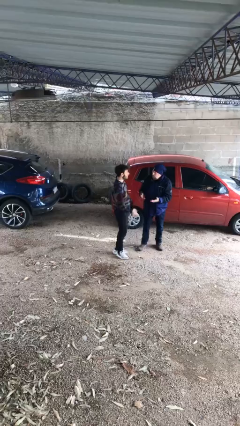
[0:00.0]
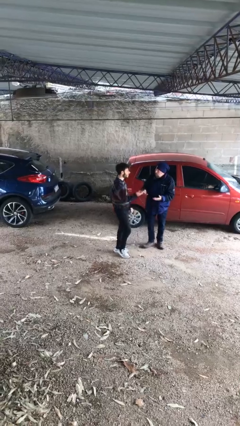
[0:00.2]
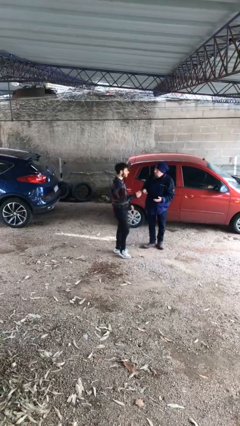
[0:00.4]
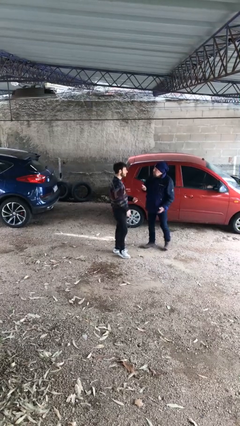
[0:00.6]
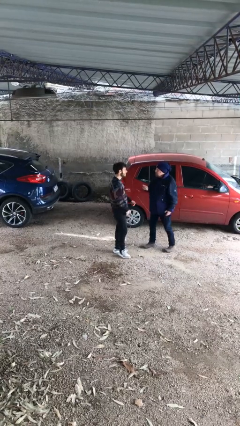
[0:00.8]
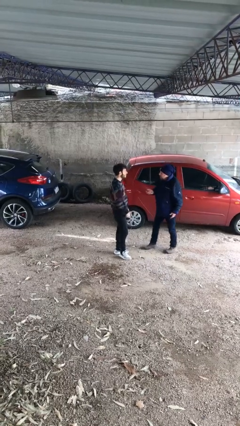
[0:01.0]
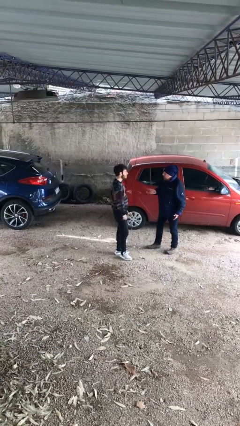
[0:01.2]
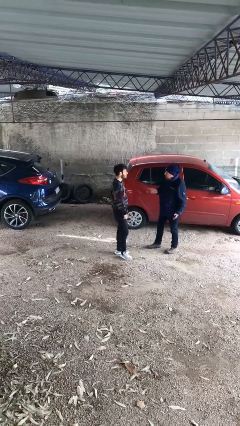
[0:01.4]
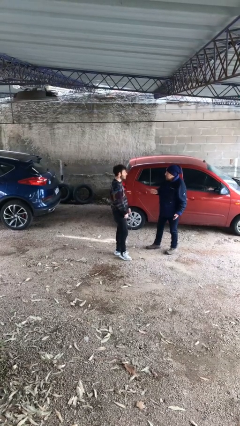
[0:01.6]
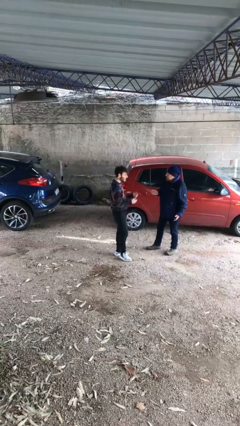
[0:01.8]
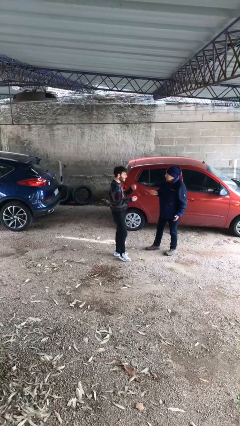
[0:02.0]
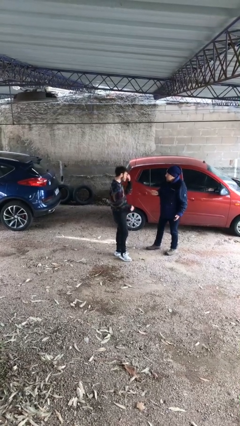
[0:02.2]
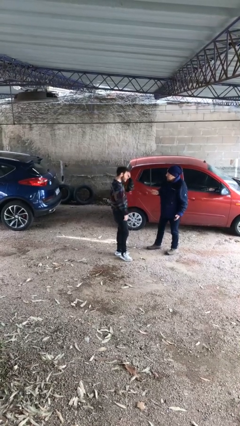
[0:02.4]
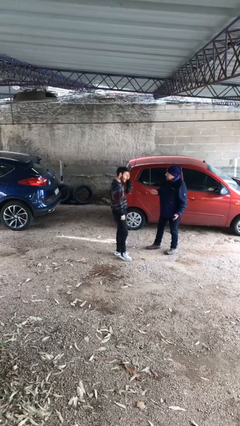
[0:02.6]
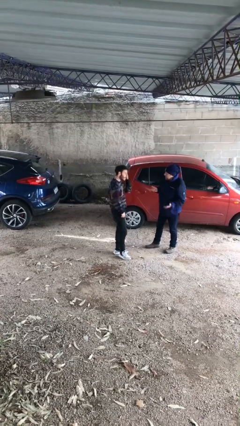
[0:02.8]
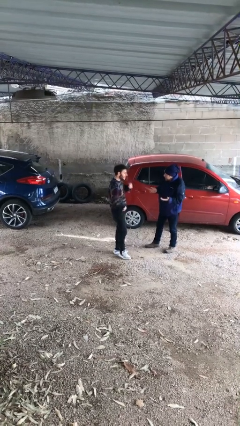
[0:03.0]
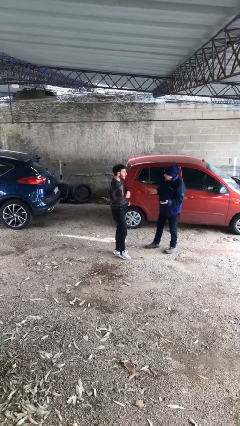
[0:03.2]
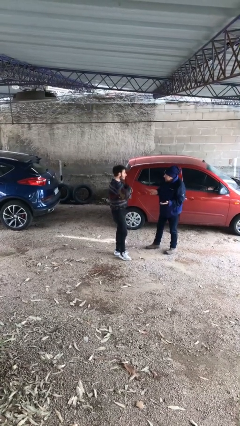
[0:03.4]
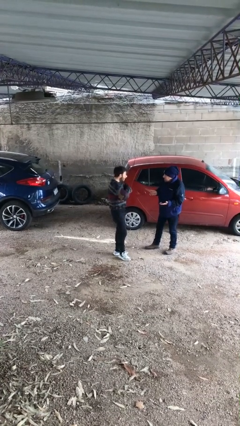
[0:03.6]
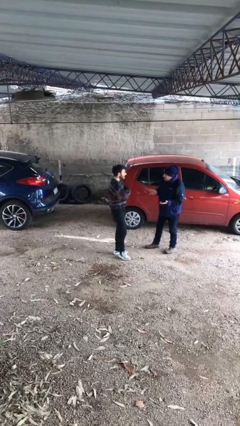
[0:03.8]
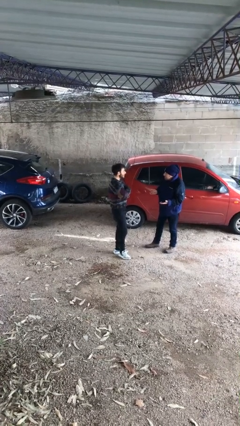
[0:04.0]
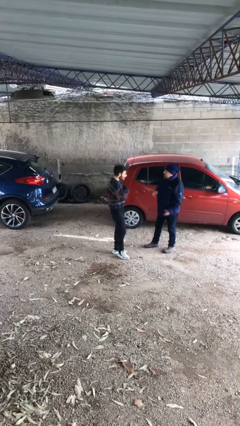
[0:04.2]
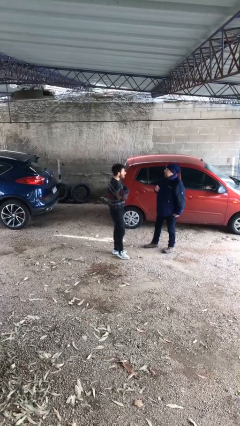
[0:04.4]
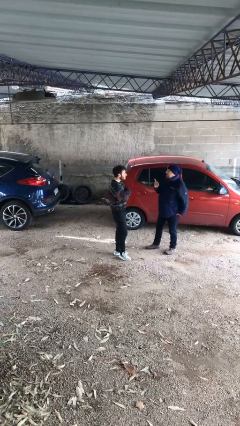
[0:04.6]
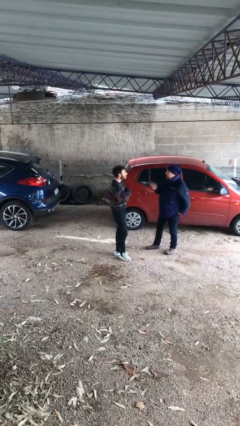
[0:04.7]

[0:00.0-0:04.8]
person talks to person

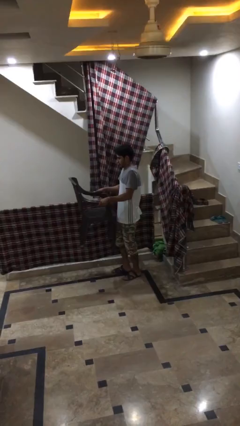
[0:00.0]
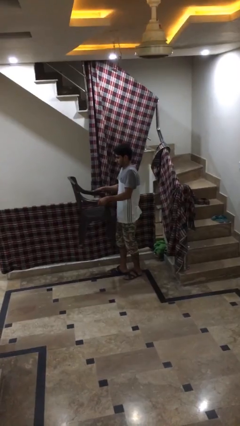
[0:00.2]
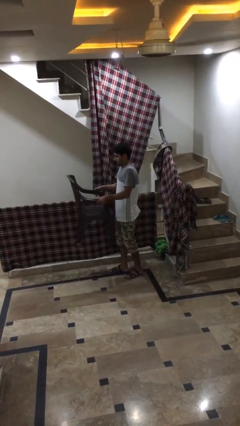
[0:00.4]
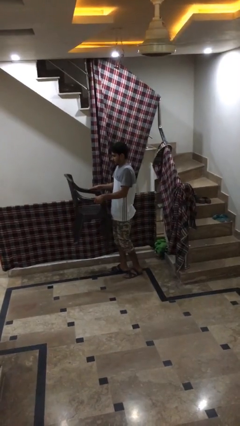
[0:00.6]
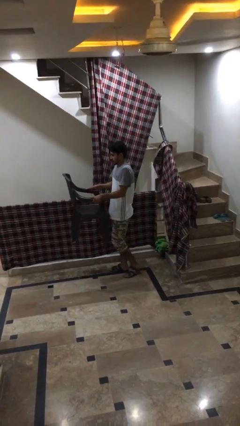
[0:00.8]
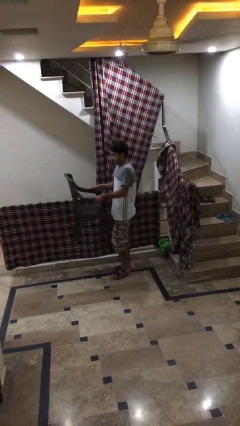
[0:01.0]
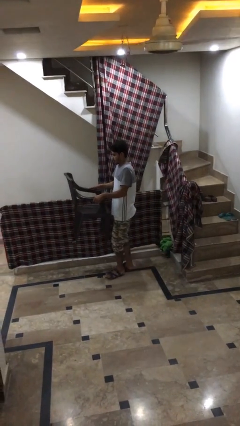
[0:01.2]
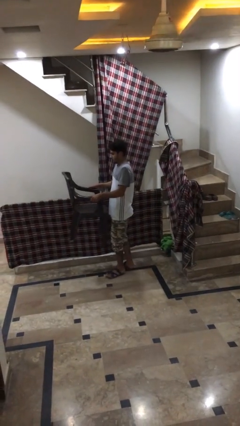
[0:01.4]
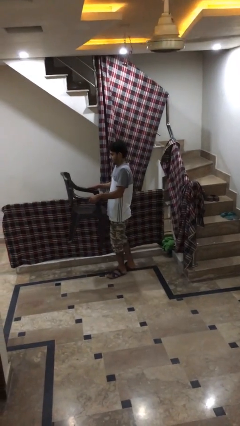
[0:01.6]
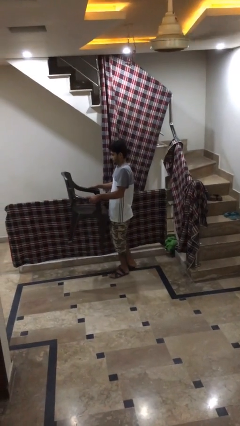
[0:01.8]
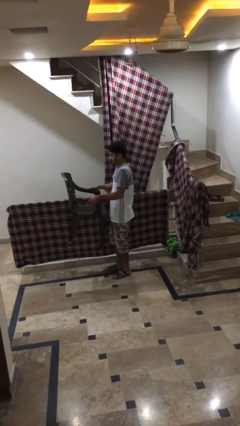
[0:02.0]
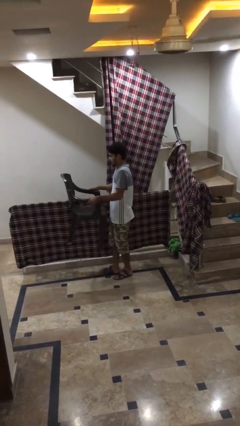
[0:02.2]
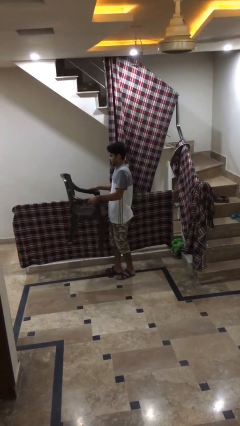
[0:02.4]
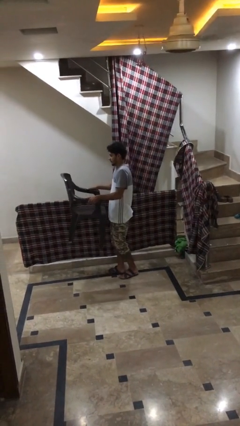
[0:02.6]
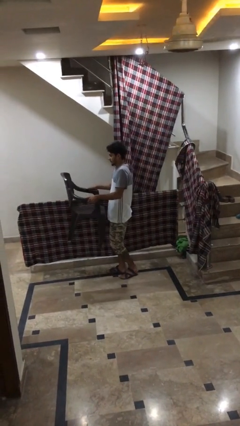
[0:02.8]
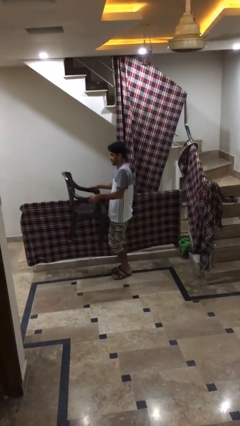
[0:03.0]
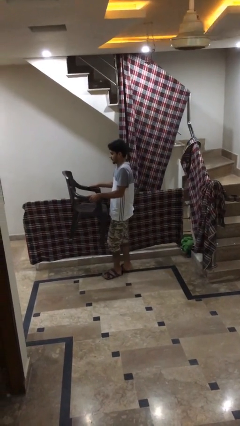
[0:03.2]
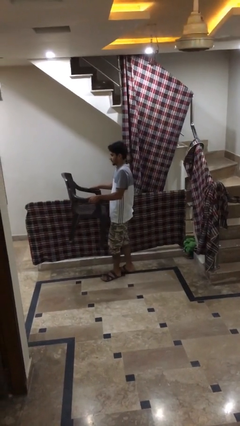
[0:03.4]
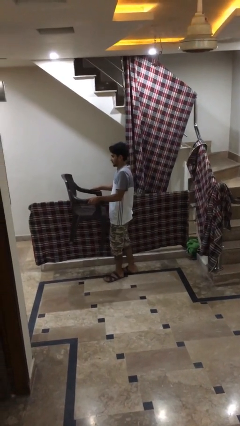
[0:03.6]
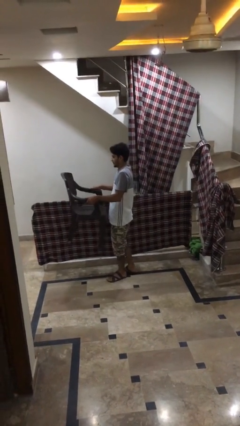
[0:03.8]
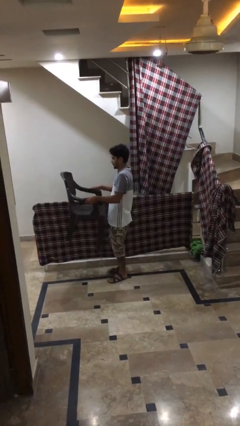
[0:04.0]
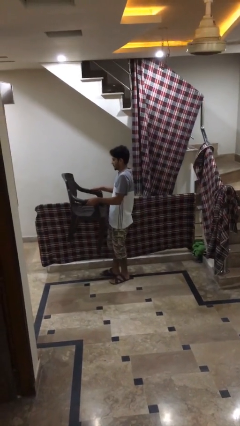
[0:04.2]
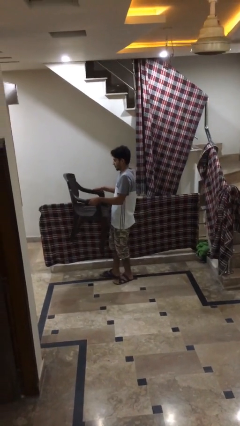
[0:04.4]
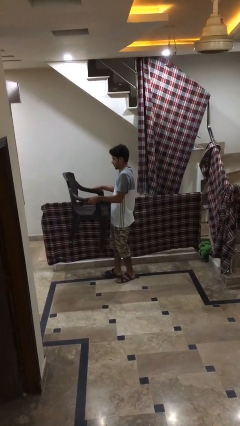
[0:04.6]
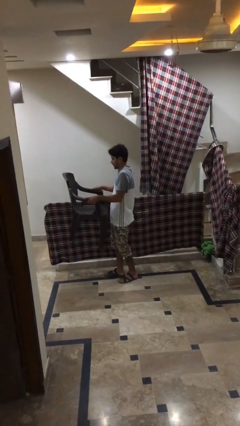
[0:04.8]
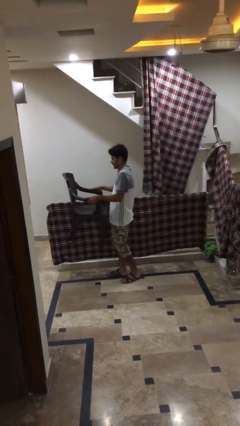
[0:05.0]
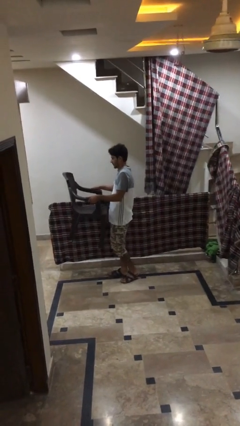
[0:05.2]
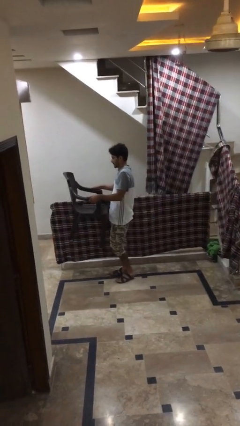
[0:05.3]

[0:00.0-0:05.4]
person carries heavy object

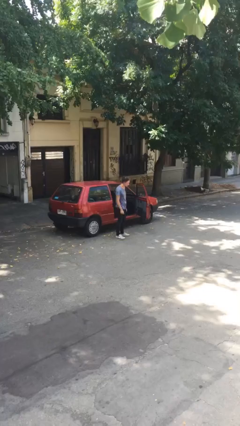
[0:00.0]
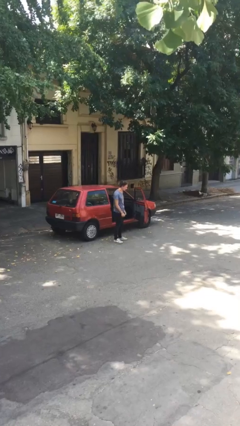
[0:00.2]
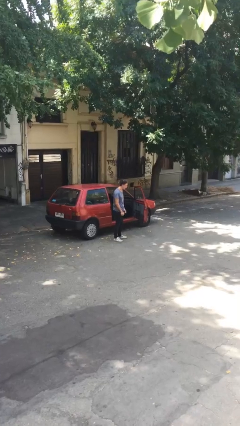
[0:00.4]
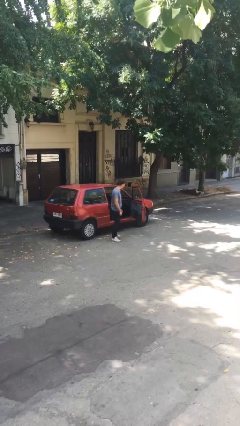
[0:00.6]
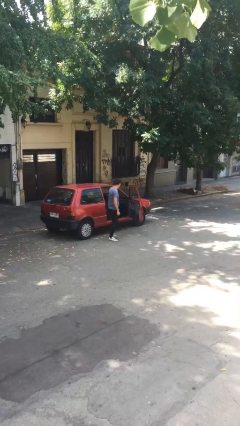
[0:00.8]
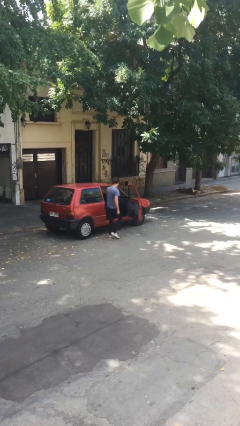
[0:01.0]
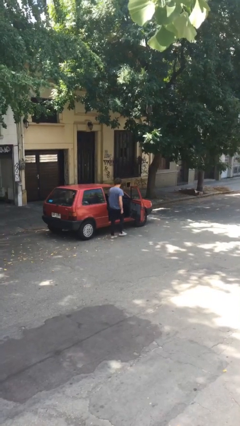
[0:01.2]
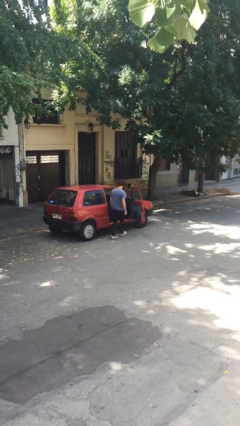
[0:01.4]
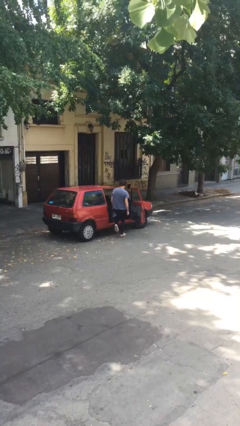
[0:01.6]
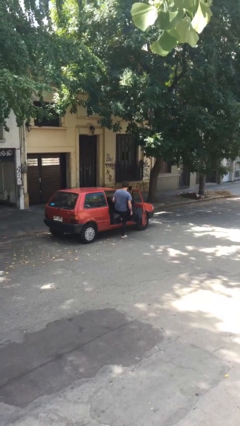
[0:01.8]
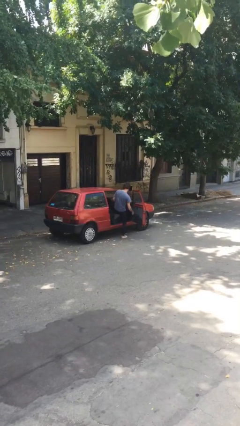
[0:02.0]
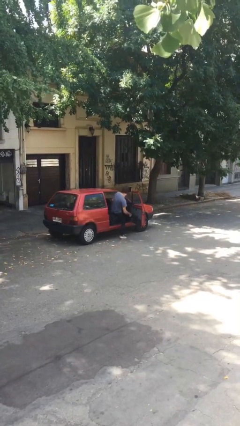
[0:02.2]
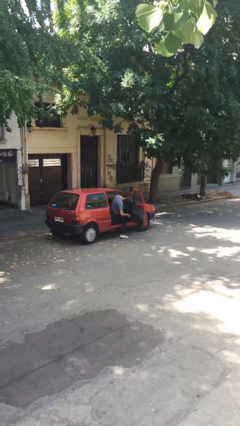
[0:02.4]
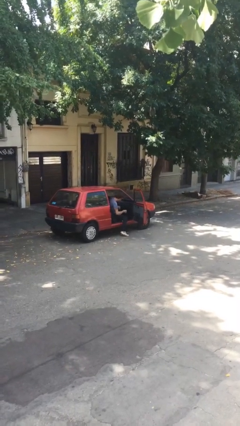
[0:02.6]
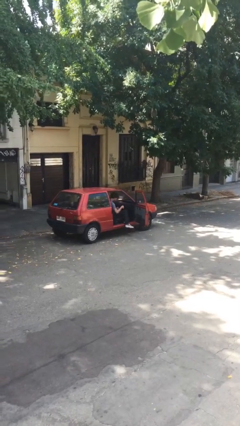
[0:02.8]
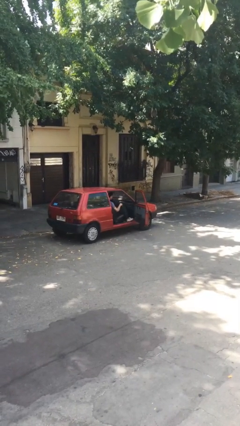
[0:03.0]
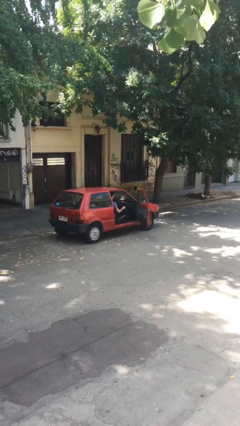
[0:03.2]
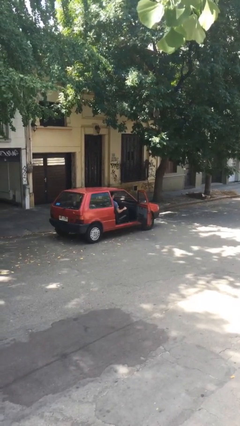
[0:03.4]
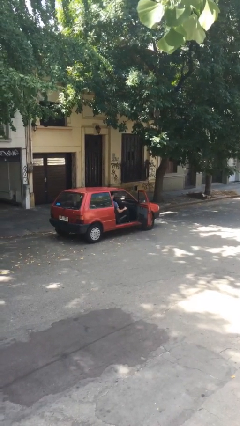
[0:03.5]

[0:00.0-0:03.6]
person enters car

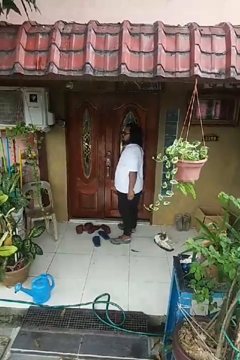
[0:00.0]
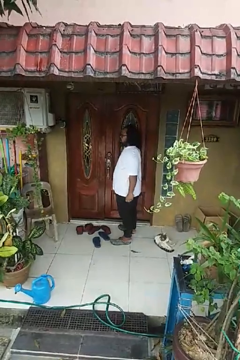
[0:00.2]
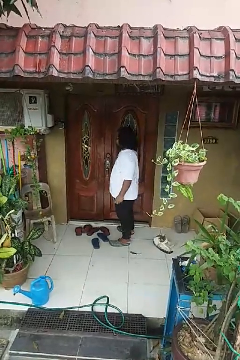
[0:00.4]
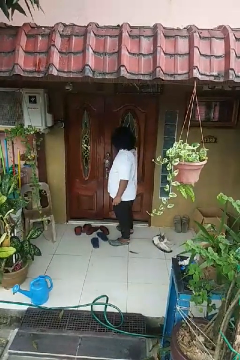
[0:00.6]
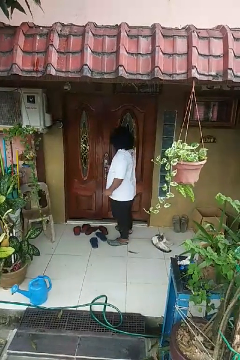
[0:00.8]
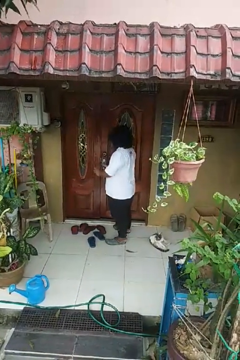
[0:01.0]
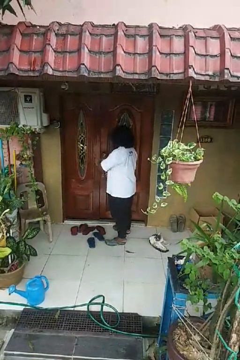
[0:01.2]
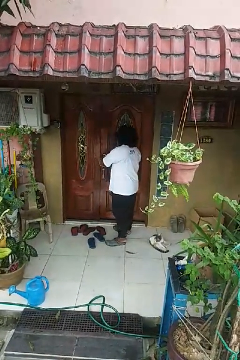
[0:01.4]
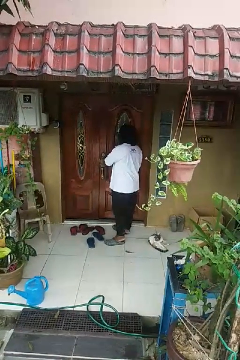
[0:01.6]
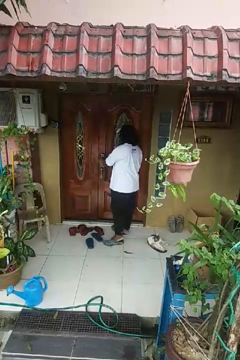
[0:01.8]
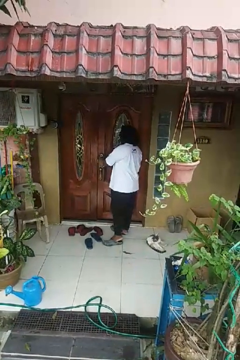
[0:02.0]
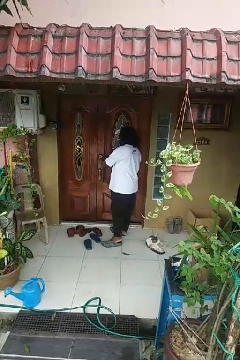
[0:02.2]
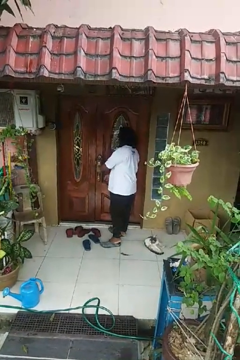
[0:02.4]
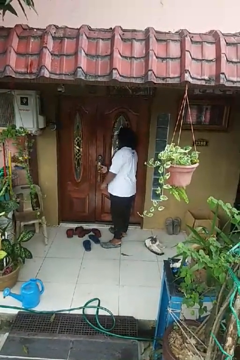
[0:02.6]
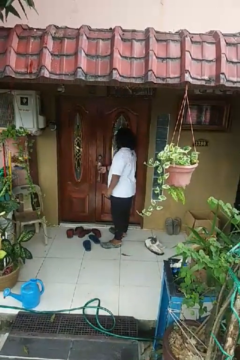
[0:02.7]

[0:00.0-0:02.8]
person unlocks door with keys

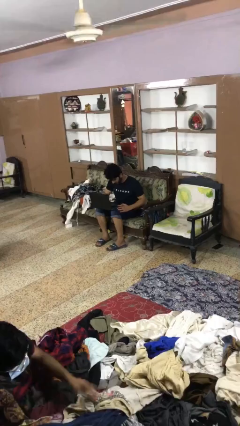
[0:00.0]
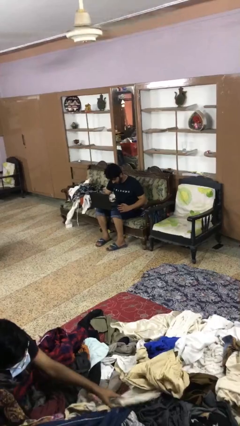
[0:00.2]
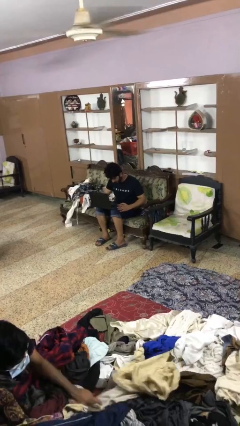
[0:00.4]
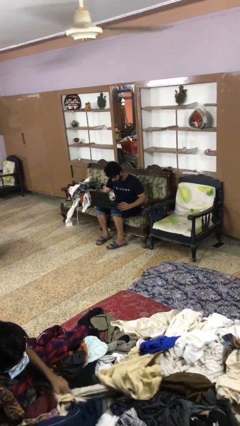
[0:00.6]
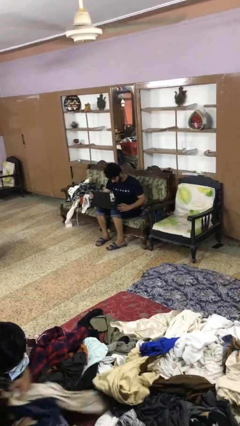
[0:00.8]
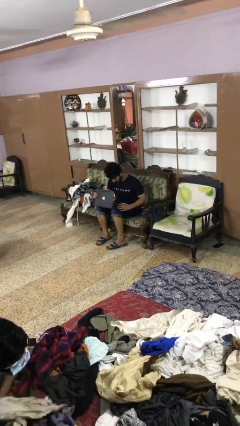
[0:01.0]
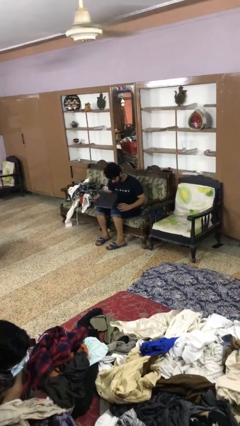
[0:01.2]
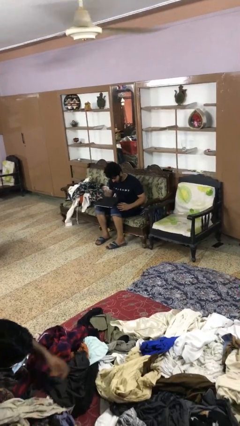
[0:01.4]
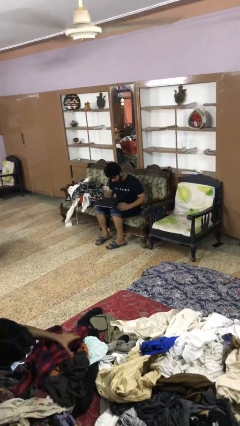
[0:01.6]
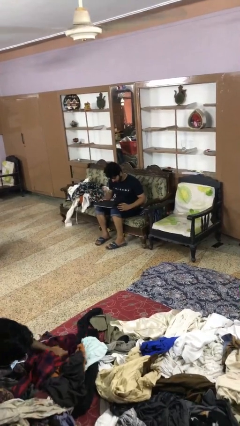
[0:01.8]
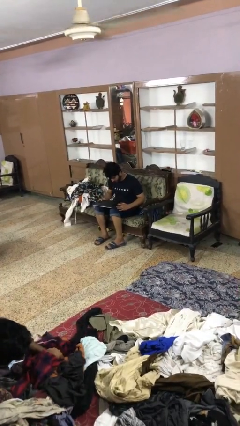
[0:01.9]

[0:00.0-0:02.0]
person closes laptop
